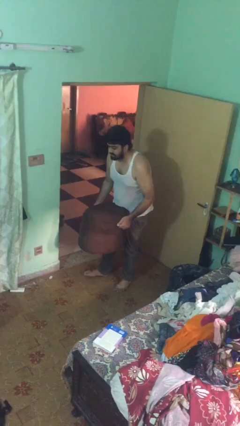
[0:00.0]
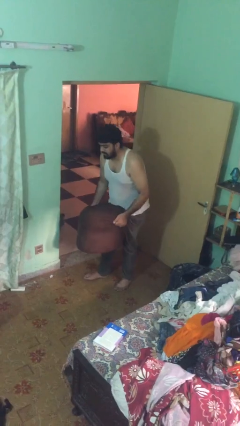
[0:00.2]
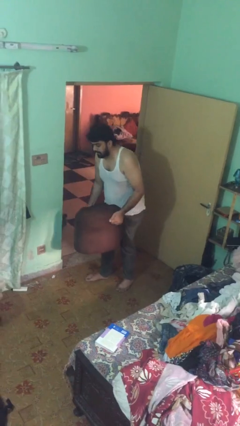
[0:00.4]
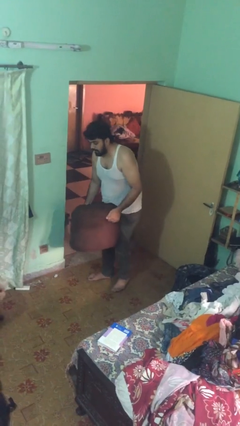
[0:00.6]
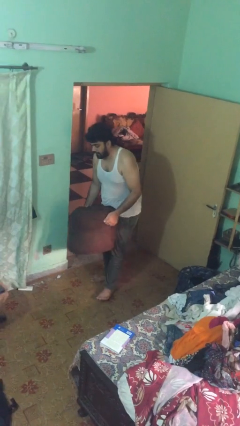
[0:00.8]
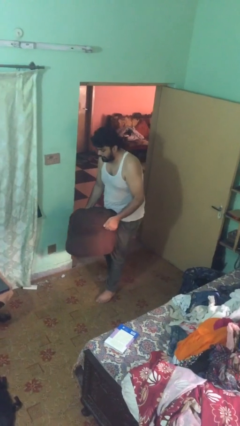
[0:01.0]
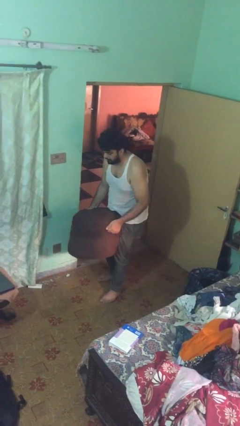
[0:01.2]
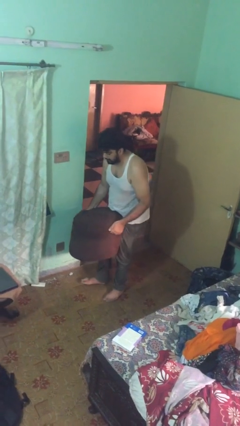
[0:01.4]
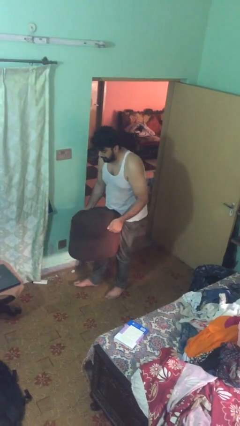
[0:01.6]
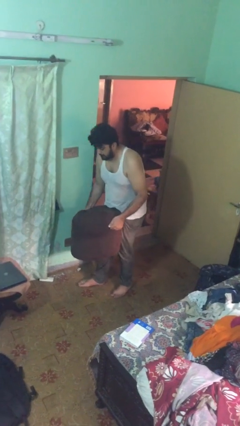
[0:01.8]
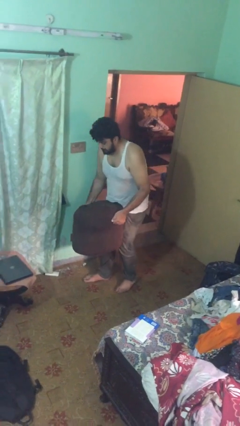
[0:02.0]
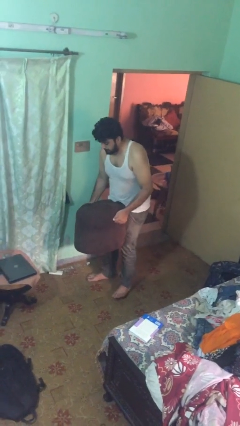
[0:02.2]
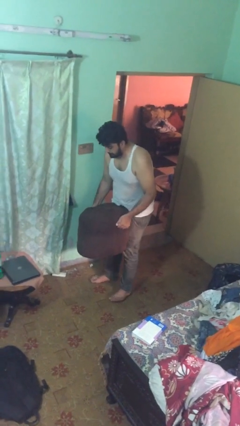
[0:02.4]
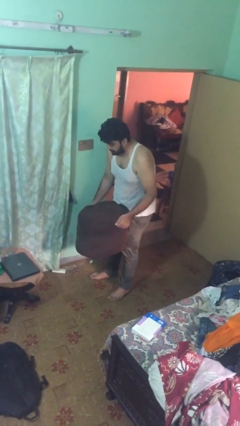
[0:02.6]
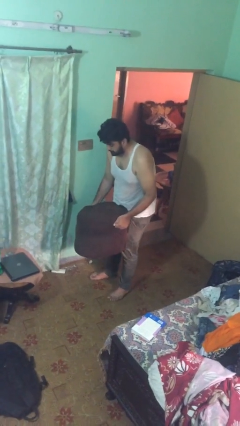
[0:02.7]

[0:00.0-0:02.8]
person carries heavy object

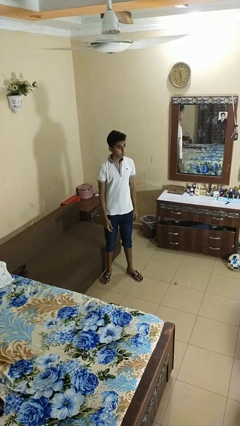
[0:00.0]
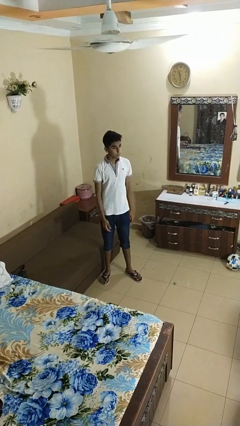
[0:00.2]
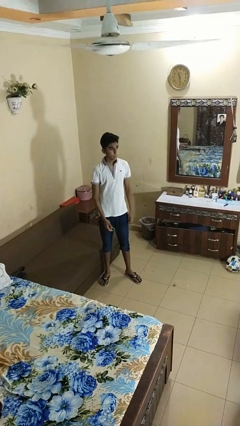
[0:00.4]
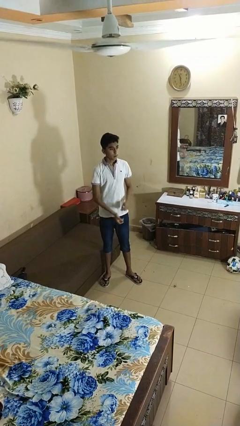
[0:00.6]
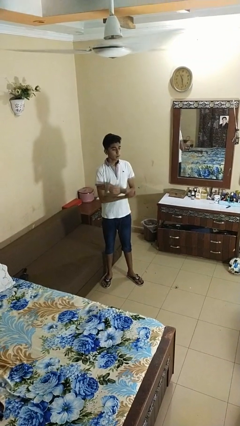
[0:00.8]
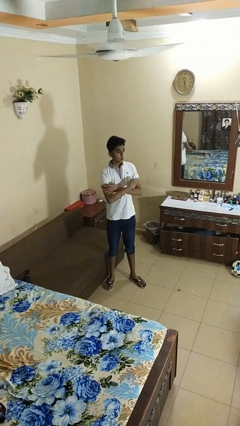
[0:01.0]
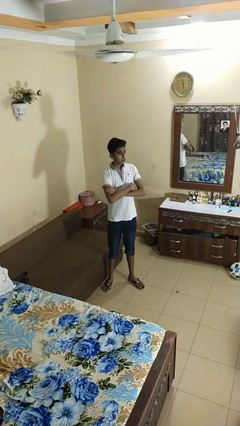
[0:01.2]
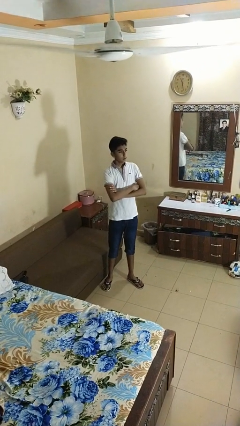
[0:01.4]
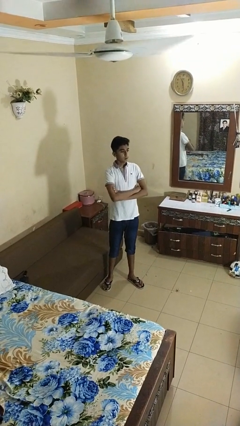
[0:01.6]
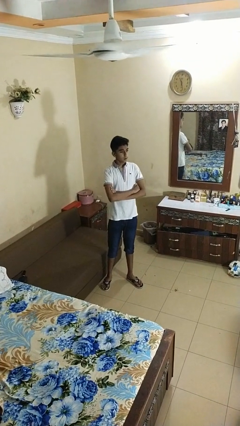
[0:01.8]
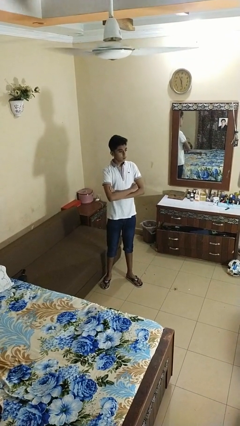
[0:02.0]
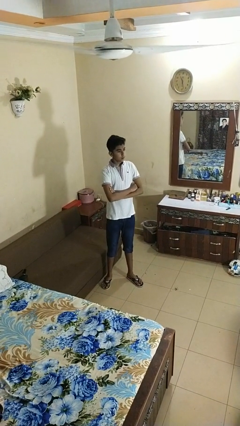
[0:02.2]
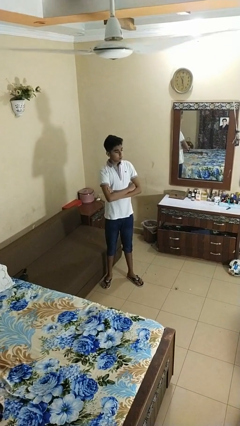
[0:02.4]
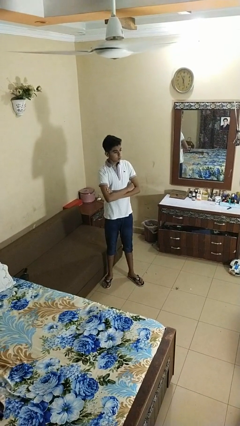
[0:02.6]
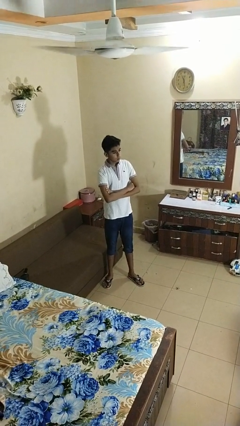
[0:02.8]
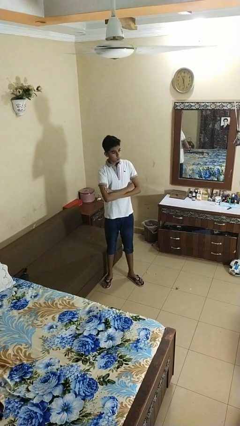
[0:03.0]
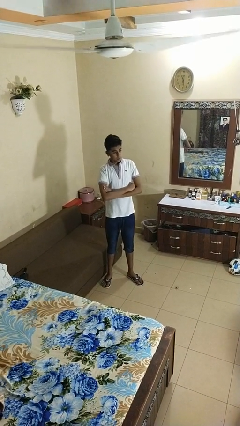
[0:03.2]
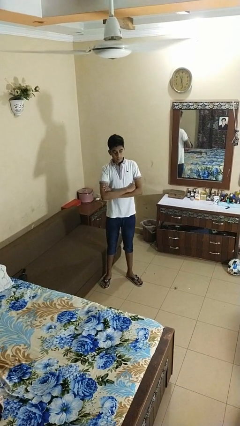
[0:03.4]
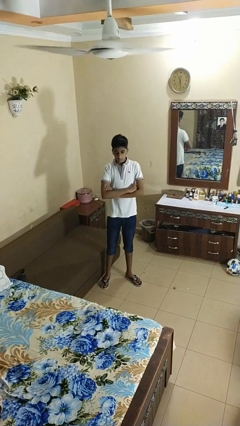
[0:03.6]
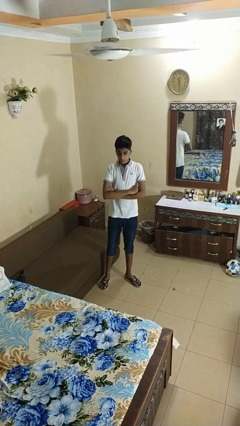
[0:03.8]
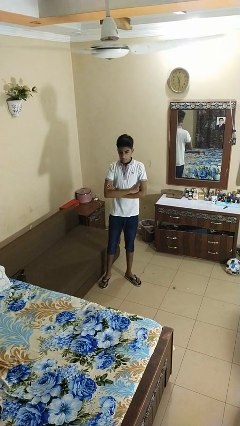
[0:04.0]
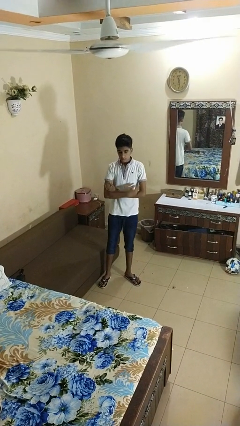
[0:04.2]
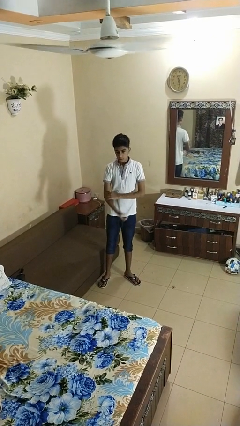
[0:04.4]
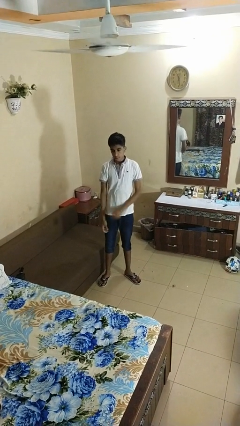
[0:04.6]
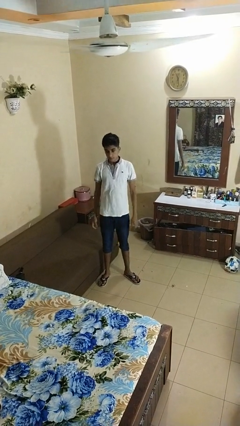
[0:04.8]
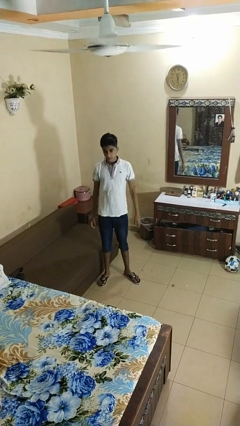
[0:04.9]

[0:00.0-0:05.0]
person crosses arms

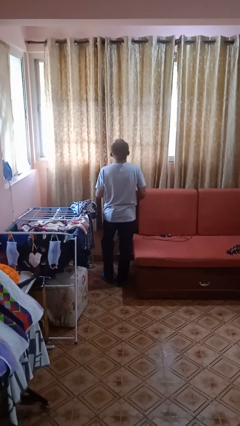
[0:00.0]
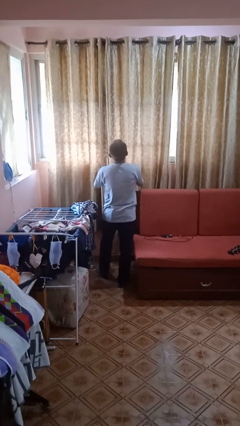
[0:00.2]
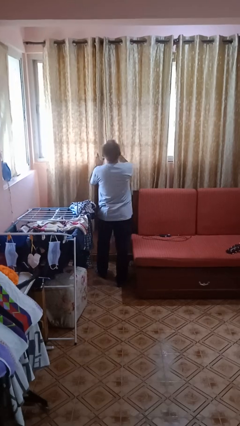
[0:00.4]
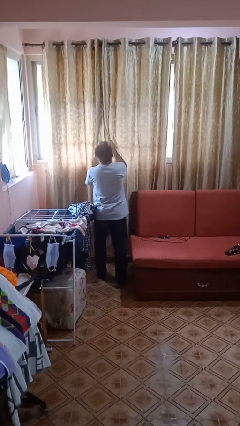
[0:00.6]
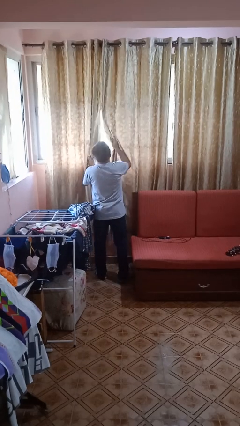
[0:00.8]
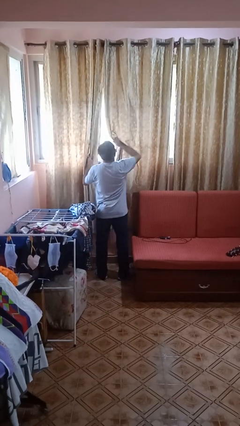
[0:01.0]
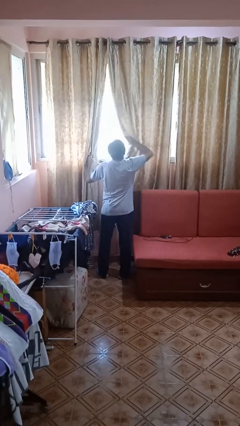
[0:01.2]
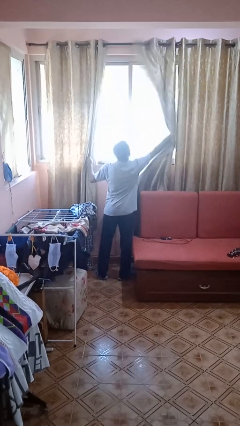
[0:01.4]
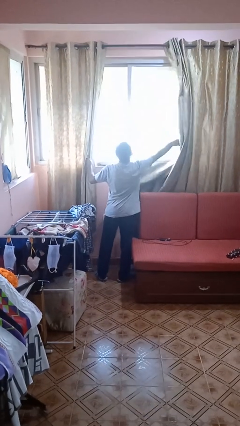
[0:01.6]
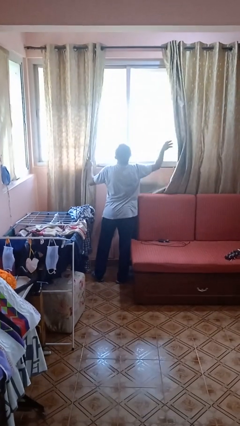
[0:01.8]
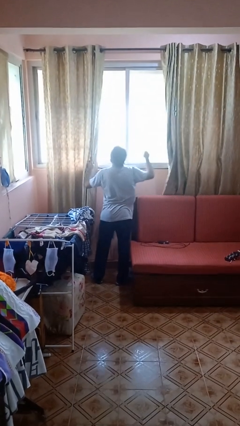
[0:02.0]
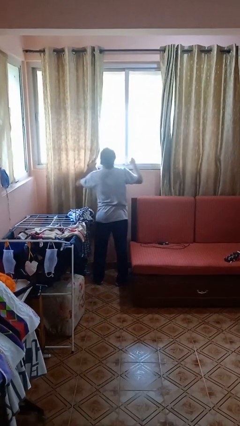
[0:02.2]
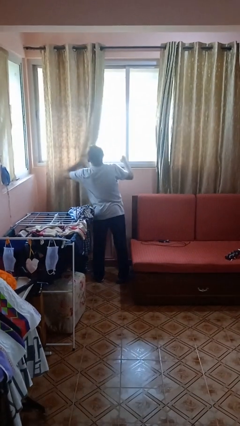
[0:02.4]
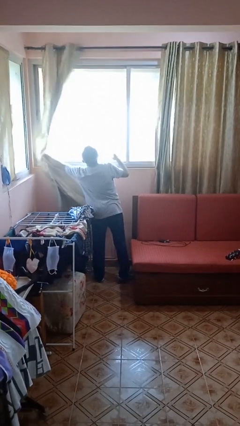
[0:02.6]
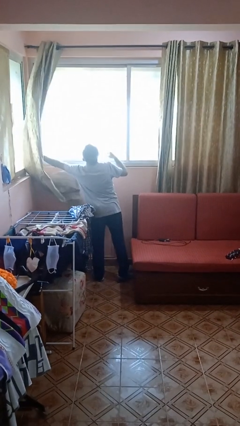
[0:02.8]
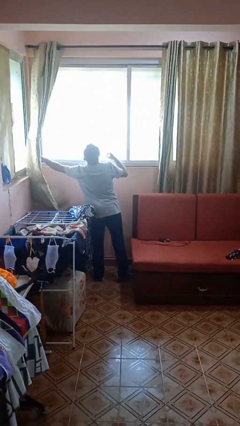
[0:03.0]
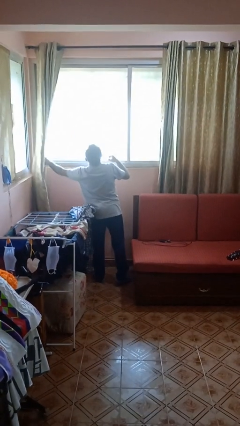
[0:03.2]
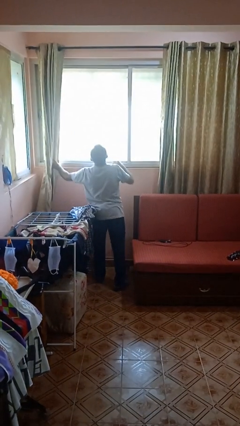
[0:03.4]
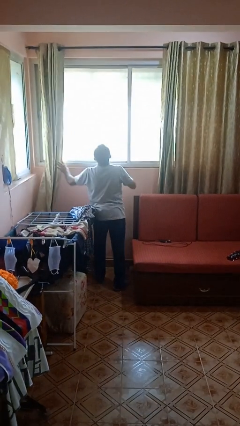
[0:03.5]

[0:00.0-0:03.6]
person opens curtains

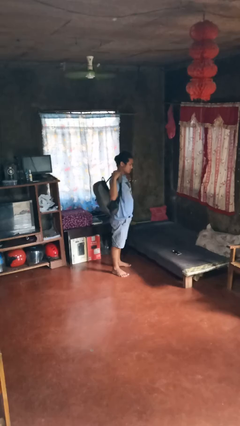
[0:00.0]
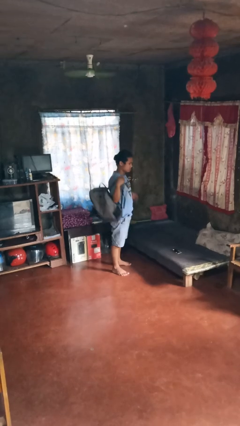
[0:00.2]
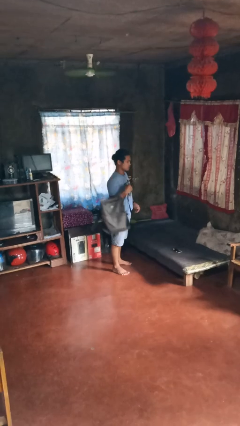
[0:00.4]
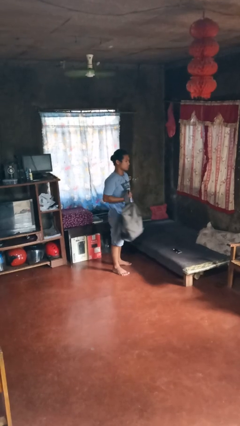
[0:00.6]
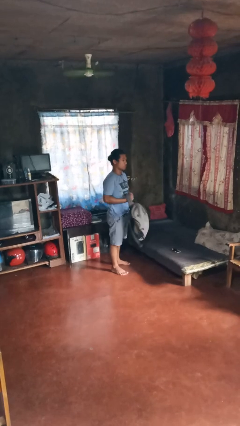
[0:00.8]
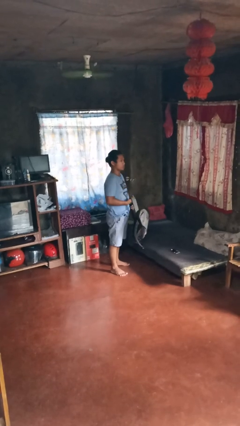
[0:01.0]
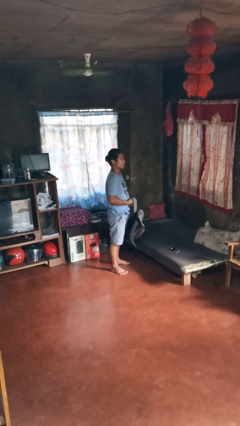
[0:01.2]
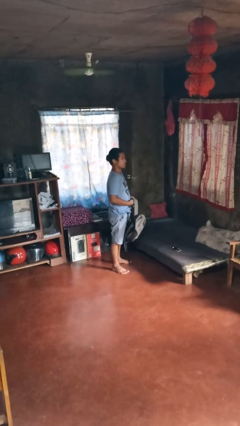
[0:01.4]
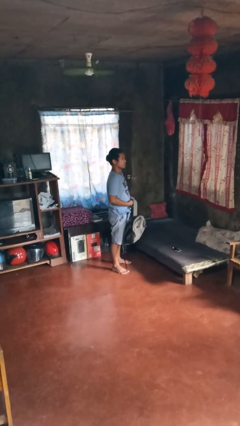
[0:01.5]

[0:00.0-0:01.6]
person takes off backpack

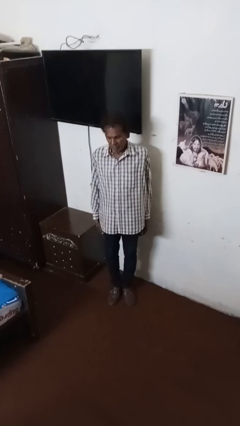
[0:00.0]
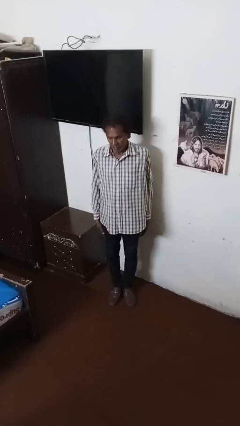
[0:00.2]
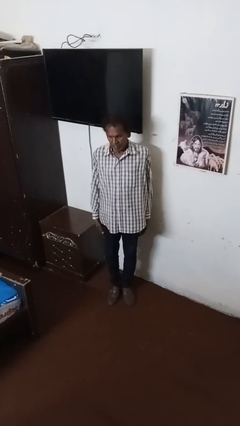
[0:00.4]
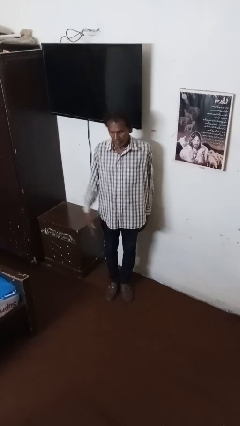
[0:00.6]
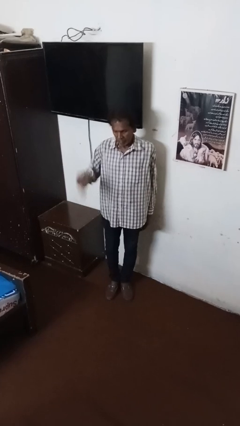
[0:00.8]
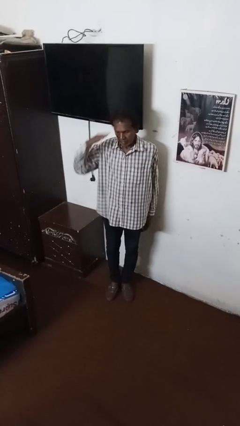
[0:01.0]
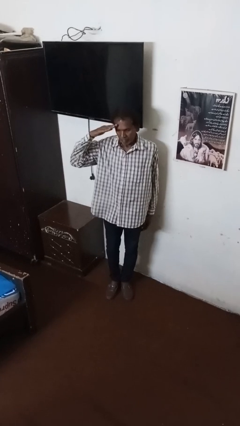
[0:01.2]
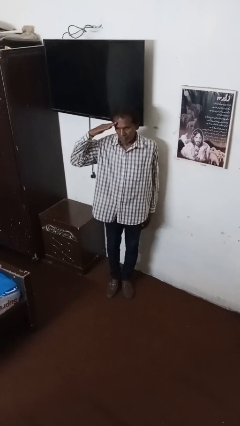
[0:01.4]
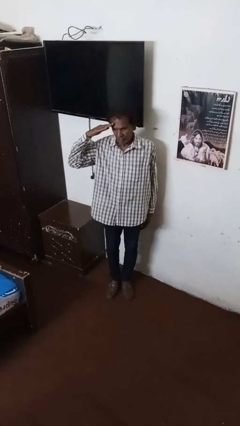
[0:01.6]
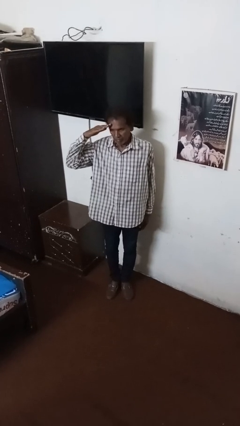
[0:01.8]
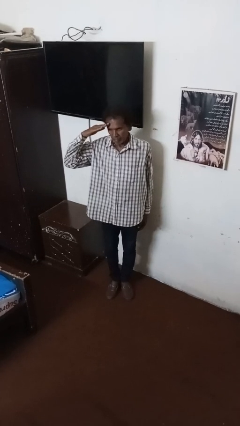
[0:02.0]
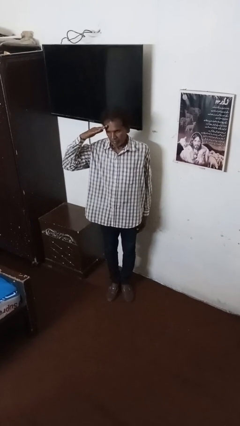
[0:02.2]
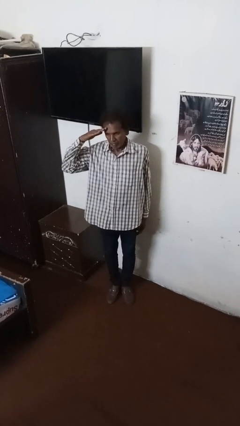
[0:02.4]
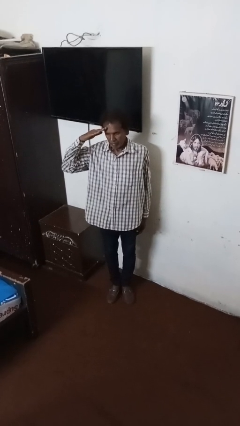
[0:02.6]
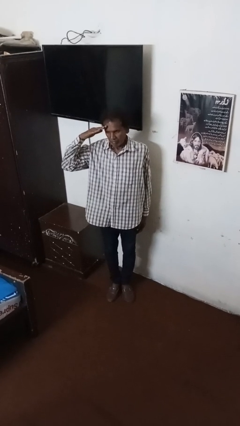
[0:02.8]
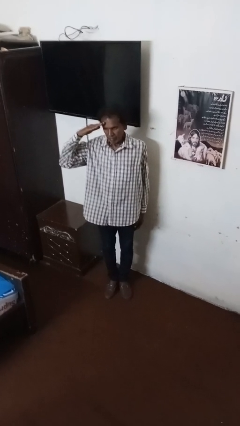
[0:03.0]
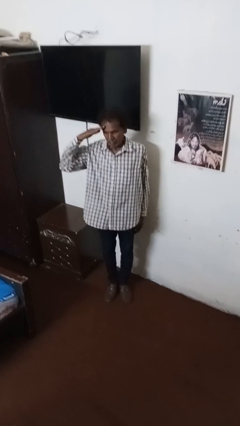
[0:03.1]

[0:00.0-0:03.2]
person salutes

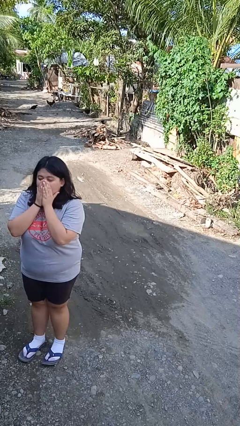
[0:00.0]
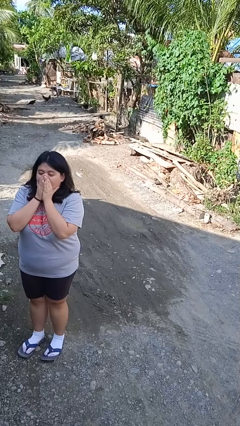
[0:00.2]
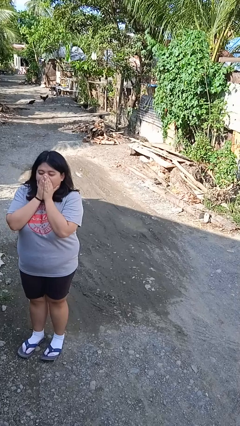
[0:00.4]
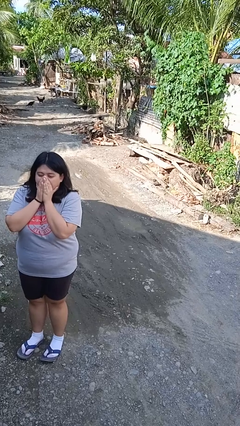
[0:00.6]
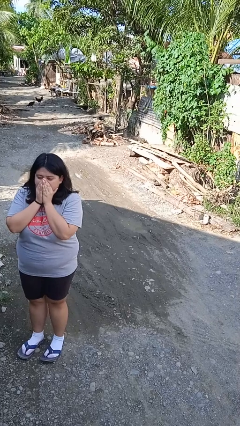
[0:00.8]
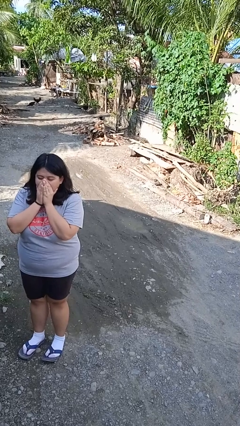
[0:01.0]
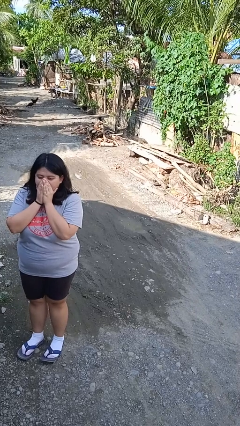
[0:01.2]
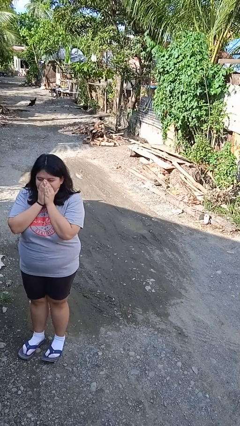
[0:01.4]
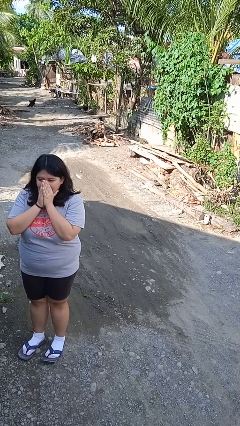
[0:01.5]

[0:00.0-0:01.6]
person blows into hands
